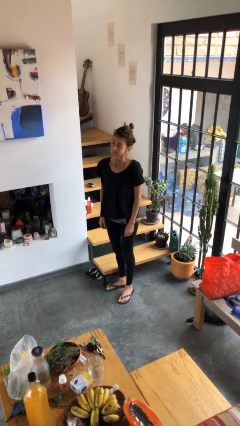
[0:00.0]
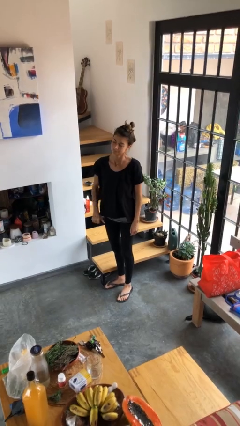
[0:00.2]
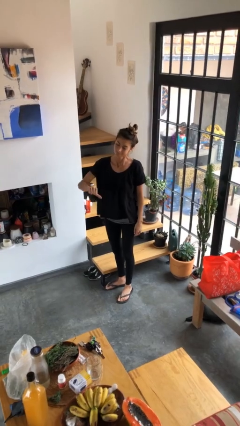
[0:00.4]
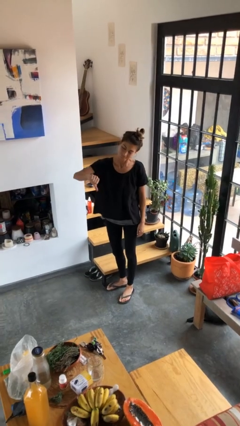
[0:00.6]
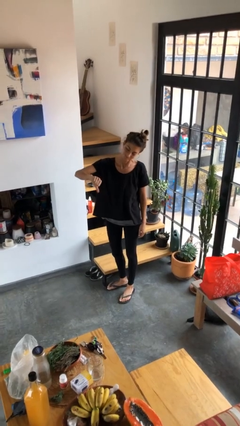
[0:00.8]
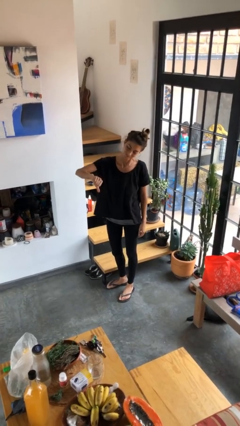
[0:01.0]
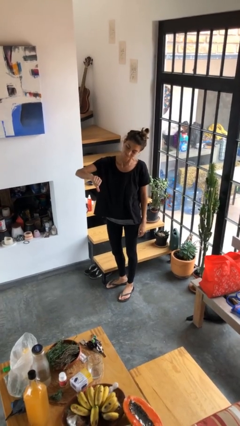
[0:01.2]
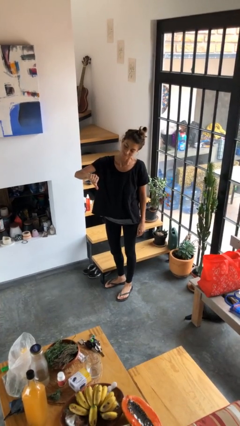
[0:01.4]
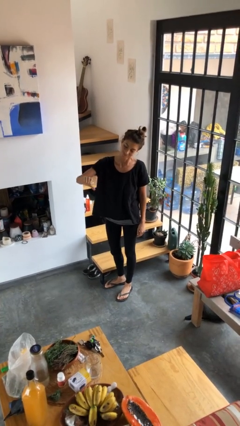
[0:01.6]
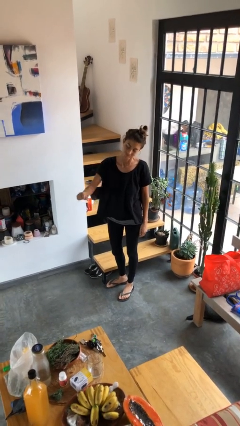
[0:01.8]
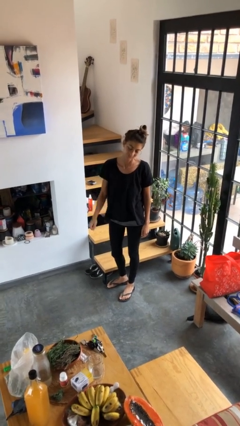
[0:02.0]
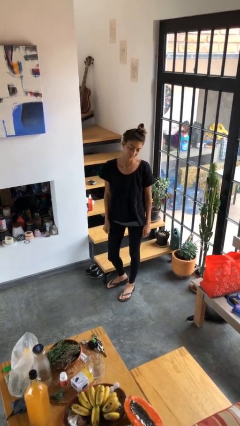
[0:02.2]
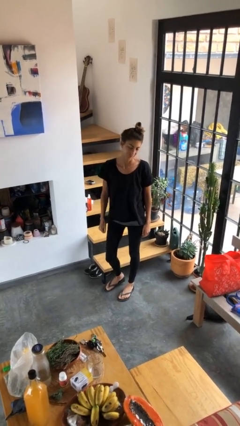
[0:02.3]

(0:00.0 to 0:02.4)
person gestures thumbs down

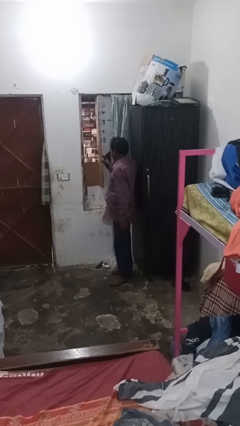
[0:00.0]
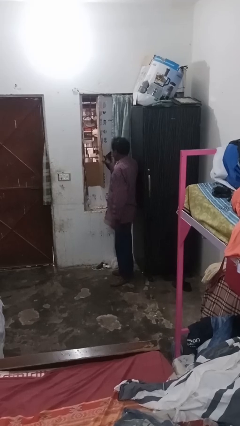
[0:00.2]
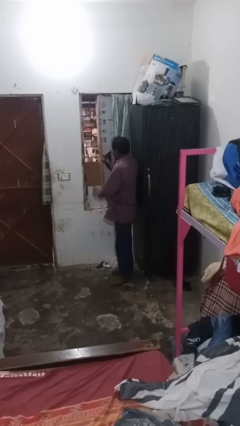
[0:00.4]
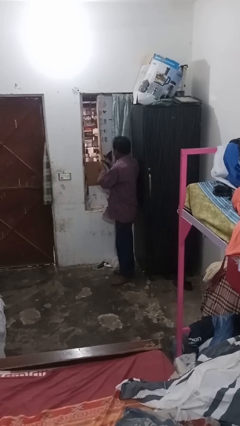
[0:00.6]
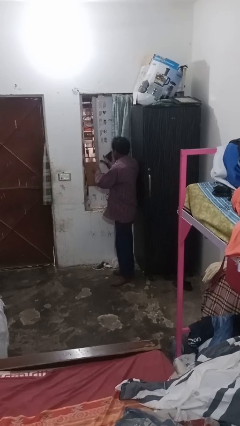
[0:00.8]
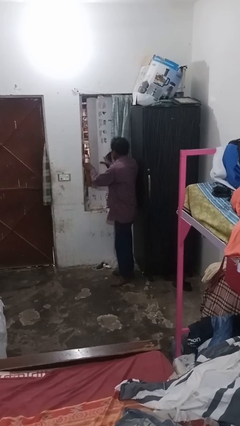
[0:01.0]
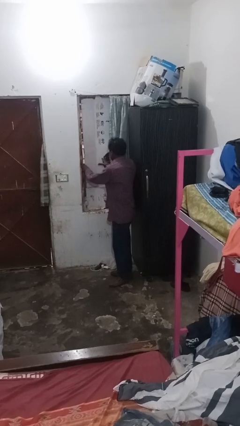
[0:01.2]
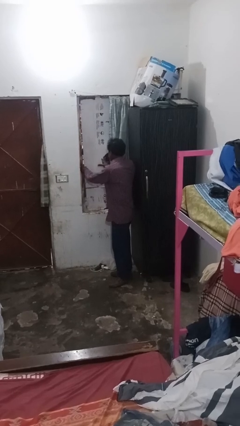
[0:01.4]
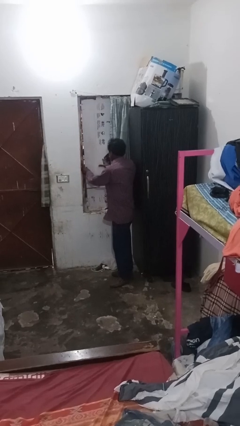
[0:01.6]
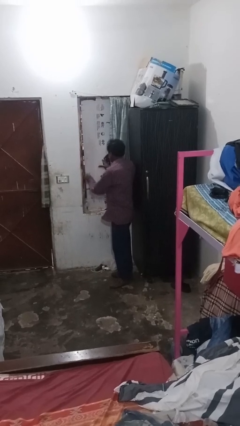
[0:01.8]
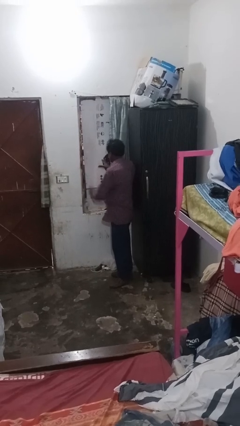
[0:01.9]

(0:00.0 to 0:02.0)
person closes home window

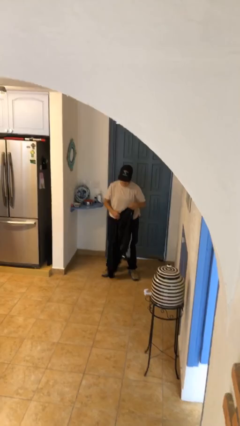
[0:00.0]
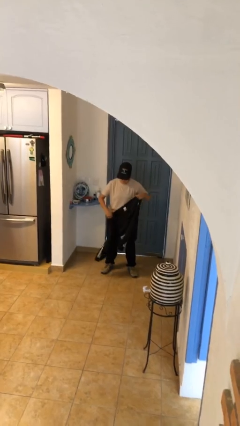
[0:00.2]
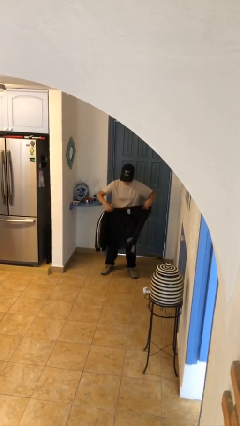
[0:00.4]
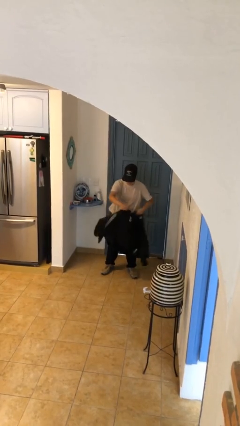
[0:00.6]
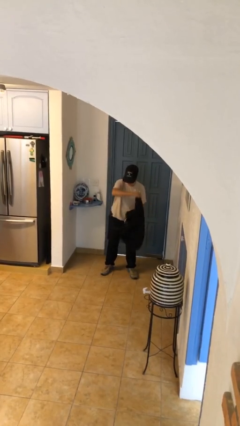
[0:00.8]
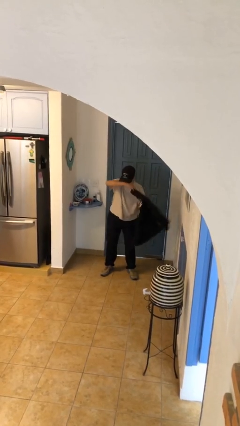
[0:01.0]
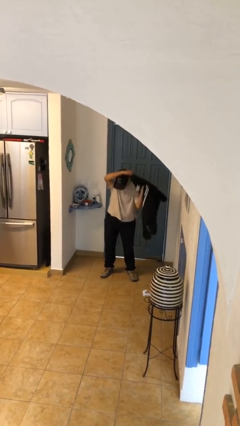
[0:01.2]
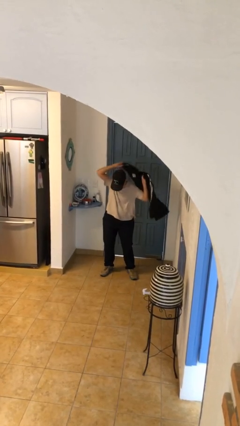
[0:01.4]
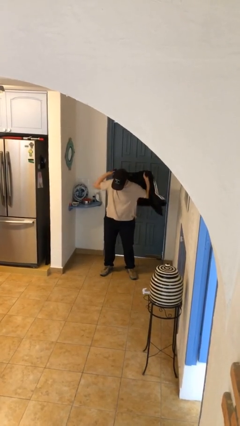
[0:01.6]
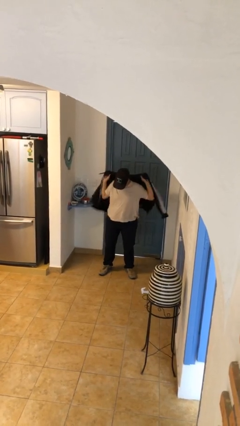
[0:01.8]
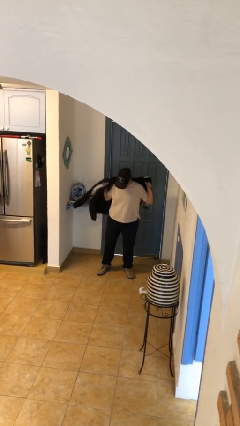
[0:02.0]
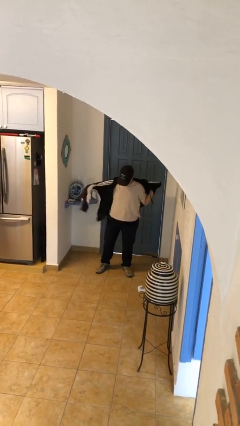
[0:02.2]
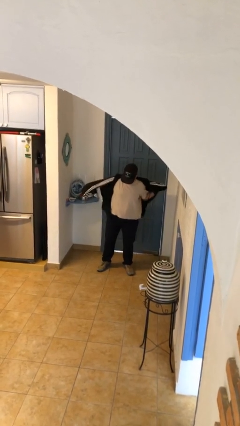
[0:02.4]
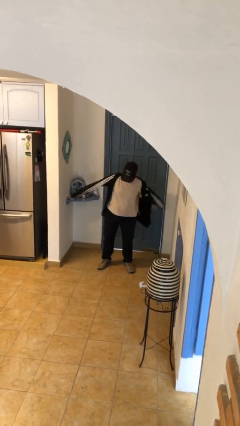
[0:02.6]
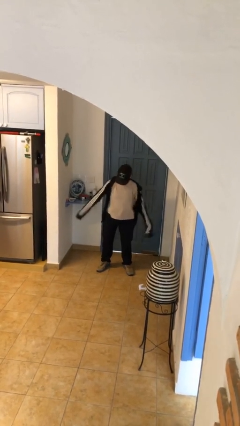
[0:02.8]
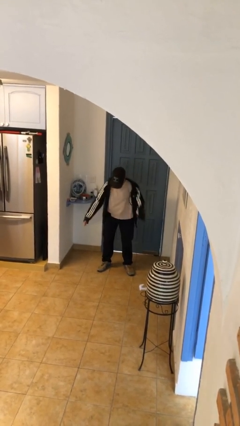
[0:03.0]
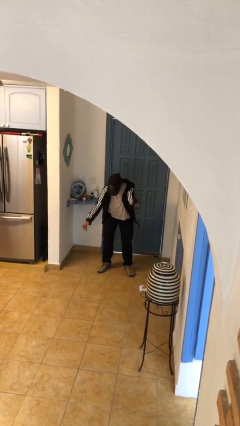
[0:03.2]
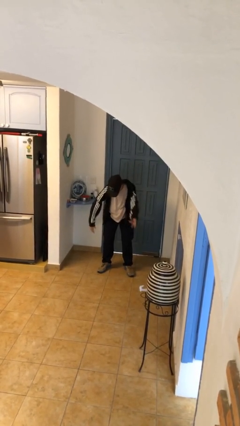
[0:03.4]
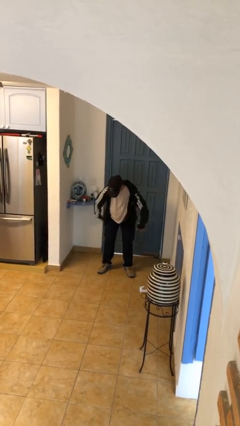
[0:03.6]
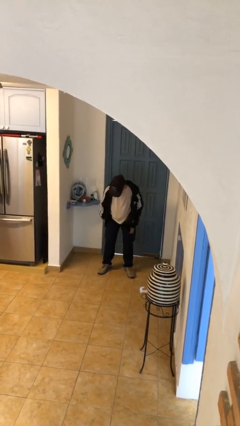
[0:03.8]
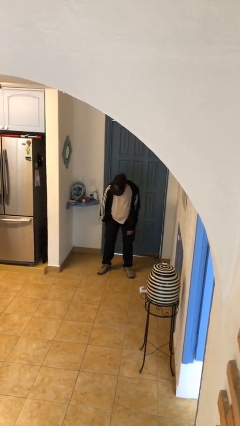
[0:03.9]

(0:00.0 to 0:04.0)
person puts on jacket

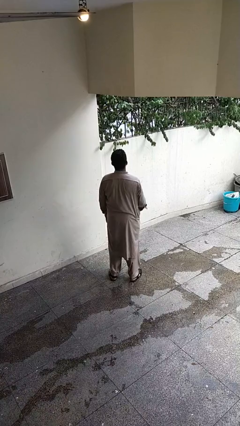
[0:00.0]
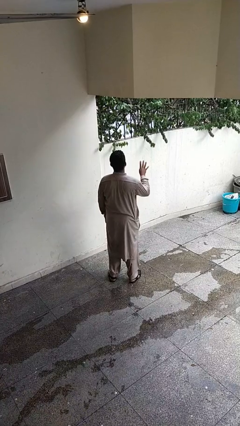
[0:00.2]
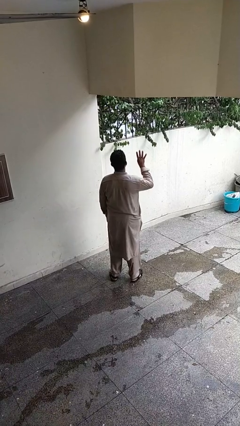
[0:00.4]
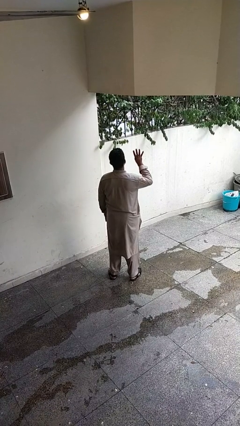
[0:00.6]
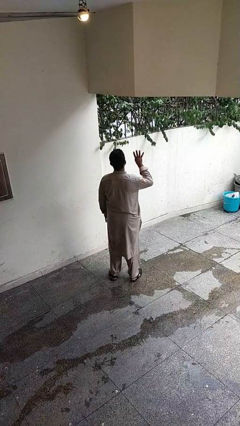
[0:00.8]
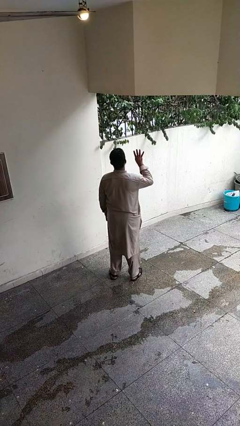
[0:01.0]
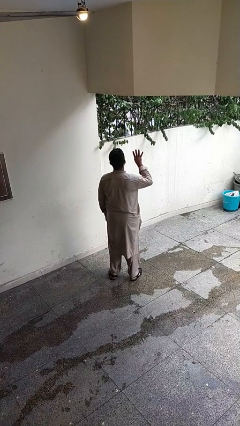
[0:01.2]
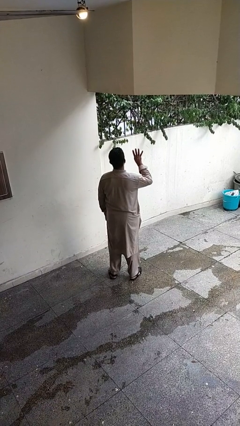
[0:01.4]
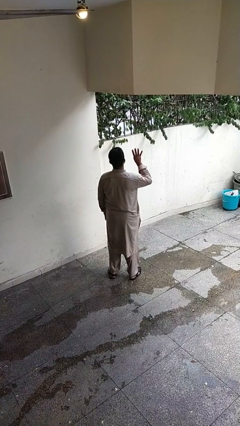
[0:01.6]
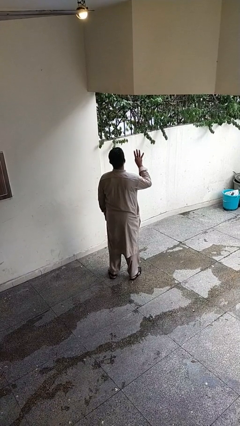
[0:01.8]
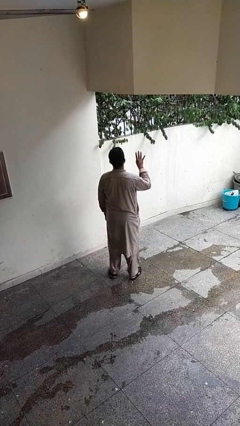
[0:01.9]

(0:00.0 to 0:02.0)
person gestures number four

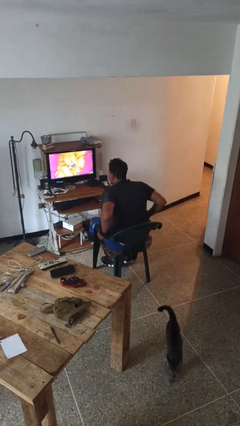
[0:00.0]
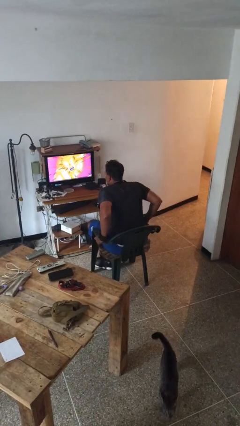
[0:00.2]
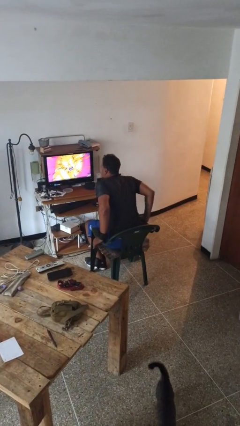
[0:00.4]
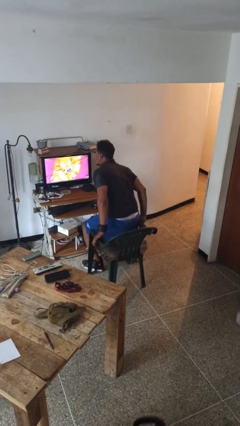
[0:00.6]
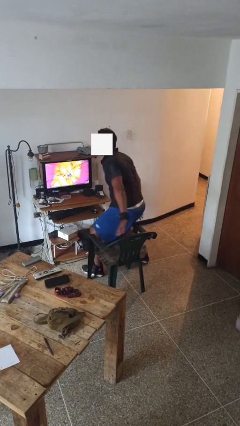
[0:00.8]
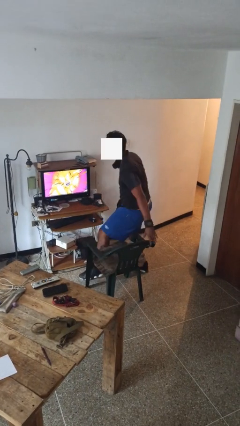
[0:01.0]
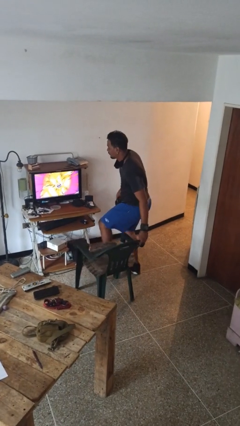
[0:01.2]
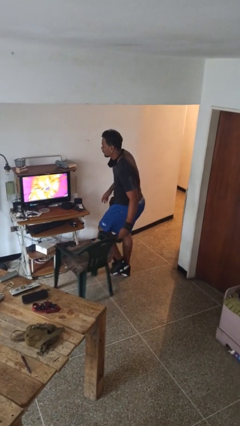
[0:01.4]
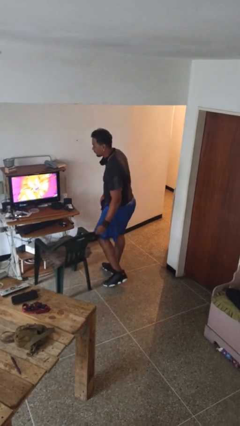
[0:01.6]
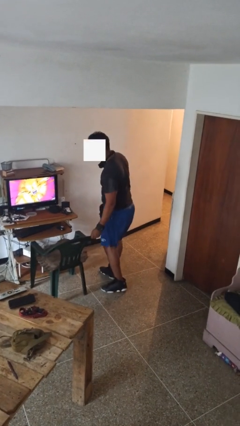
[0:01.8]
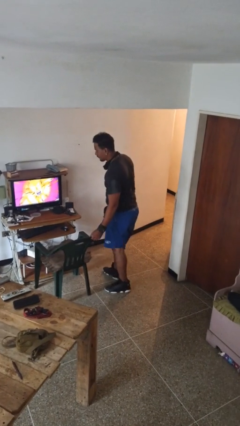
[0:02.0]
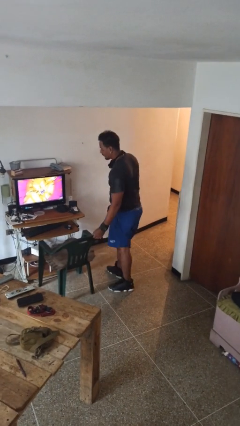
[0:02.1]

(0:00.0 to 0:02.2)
person stands up

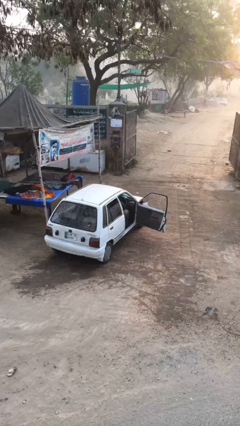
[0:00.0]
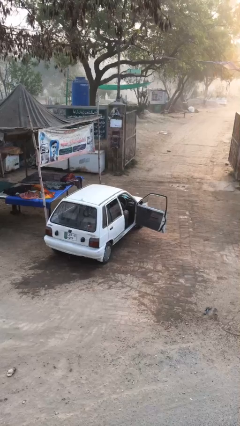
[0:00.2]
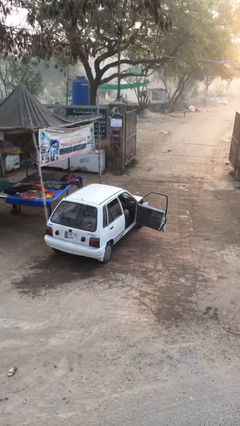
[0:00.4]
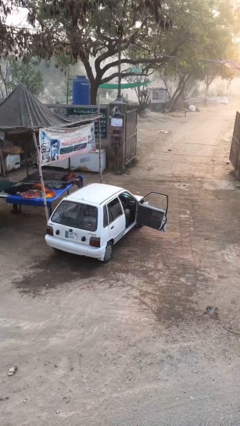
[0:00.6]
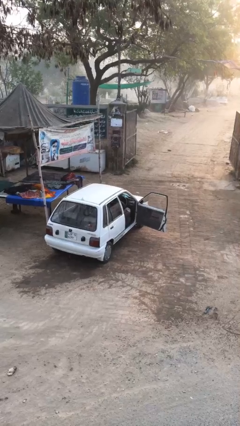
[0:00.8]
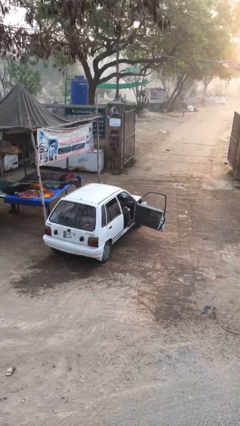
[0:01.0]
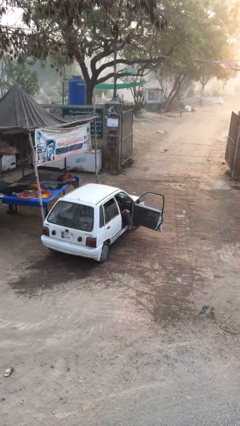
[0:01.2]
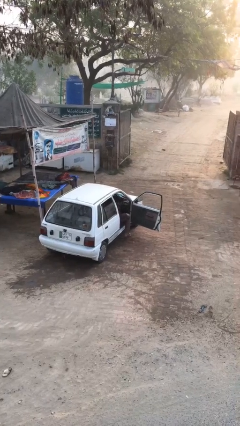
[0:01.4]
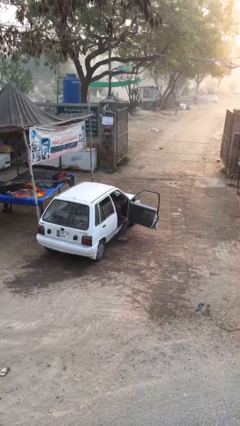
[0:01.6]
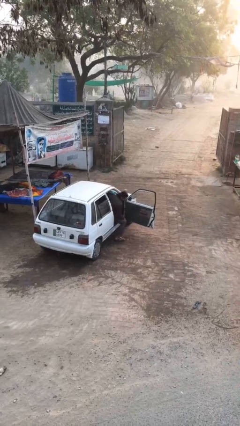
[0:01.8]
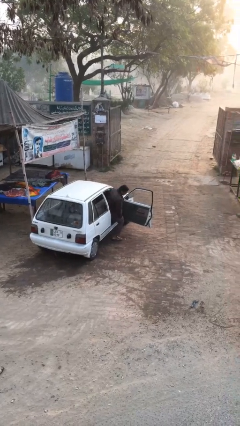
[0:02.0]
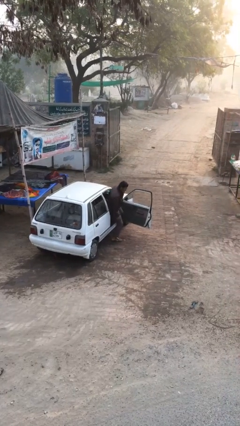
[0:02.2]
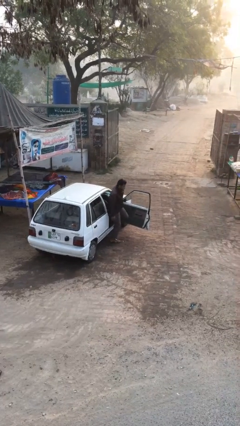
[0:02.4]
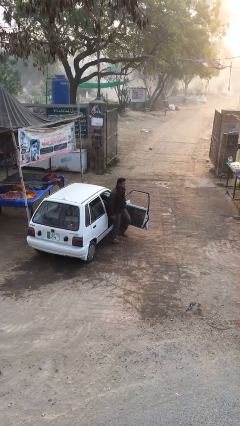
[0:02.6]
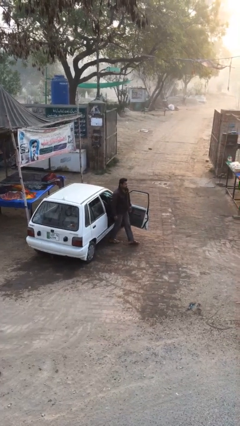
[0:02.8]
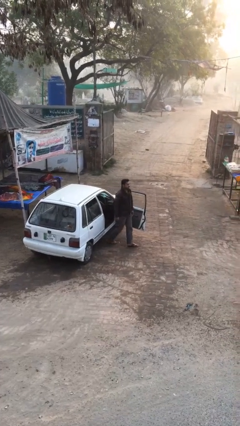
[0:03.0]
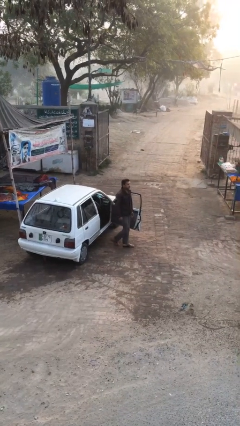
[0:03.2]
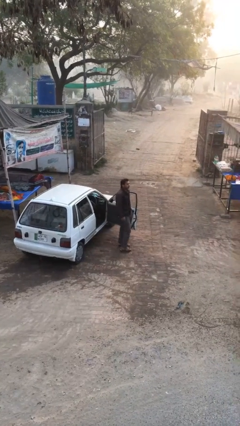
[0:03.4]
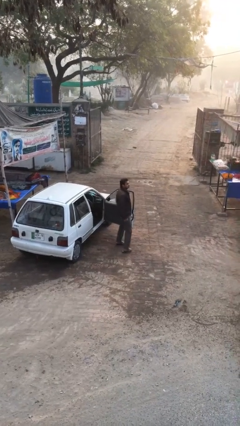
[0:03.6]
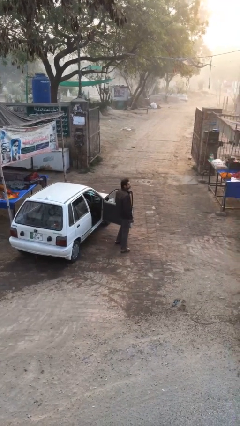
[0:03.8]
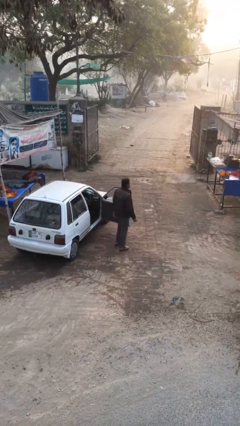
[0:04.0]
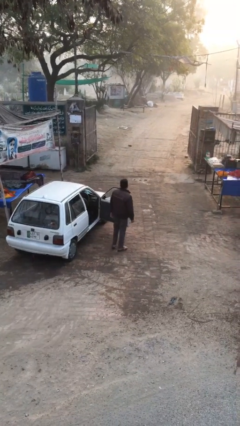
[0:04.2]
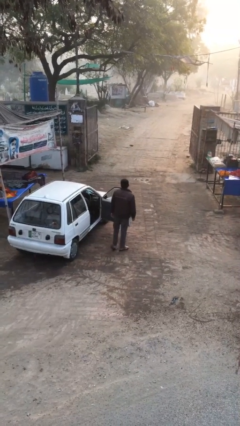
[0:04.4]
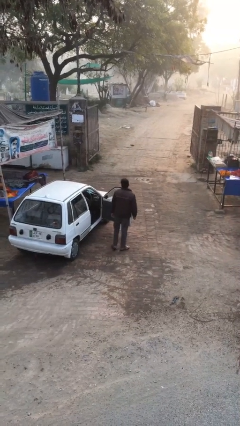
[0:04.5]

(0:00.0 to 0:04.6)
person exits car

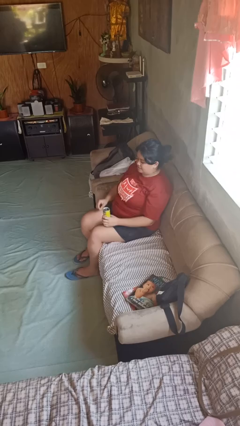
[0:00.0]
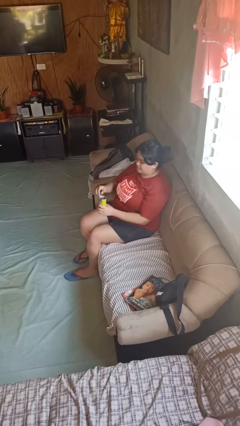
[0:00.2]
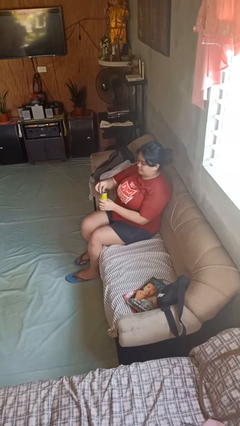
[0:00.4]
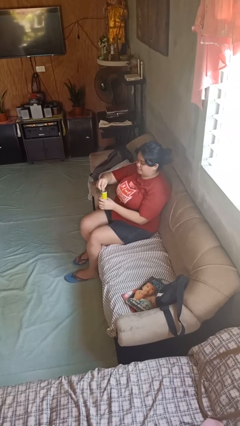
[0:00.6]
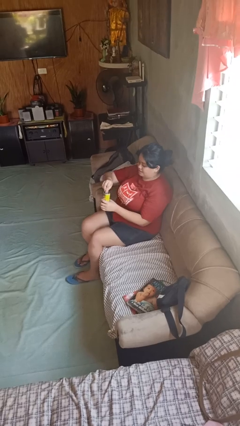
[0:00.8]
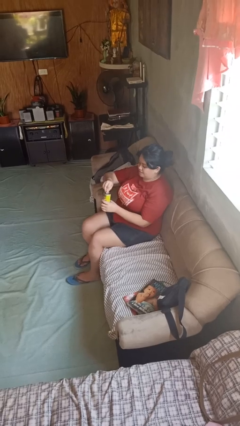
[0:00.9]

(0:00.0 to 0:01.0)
person opens beverage can
